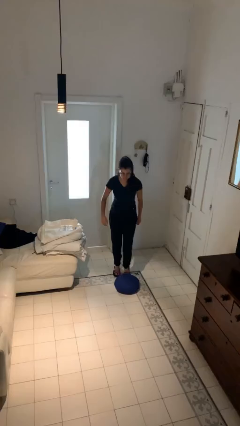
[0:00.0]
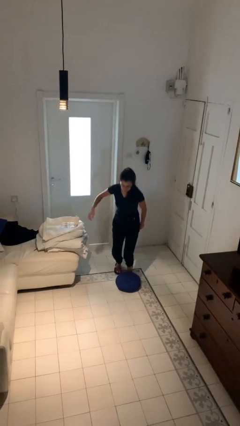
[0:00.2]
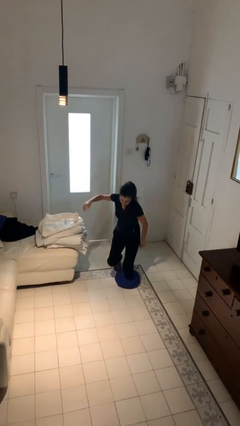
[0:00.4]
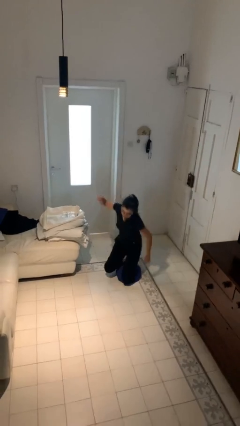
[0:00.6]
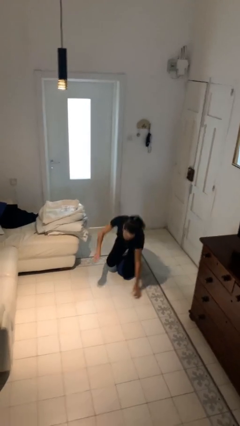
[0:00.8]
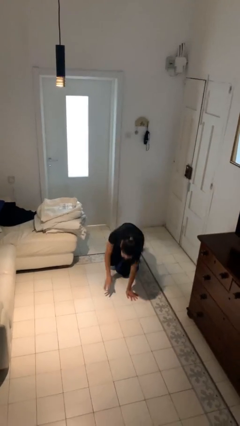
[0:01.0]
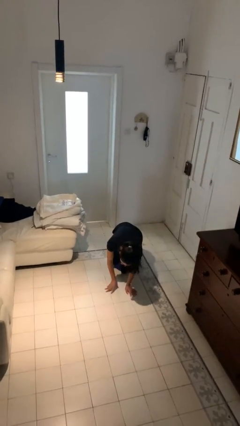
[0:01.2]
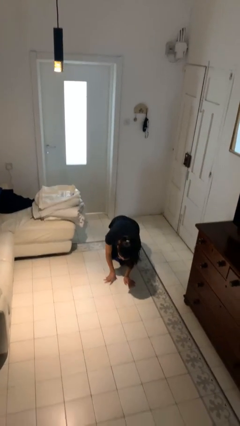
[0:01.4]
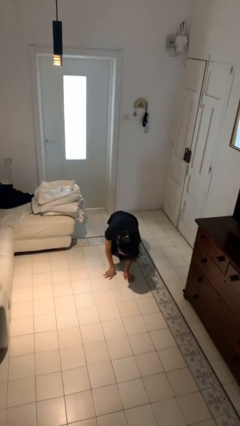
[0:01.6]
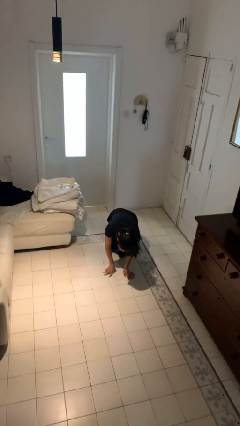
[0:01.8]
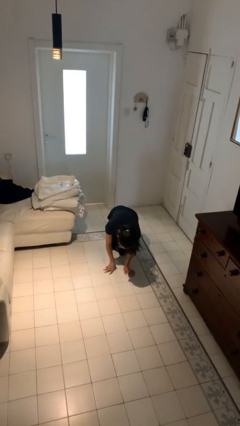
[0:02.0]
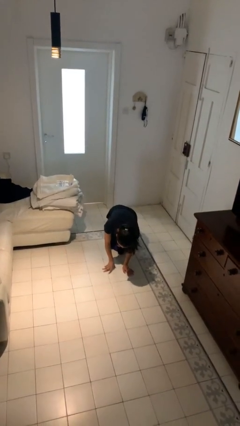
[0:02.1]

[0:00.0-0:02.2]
person trips on object on floor

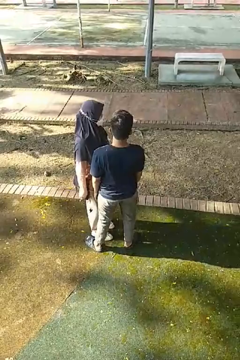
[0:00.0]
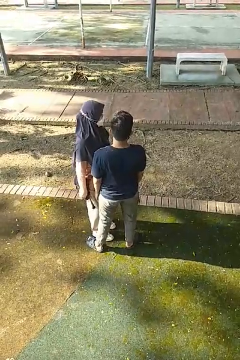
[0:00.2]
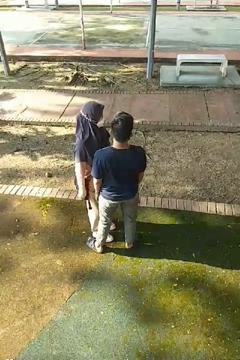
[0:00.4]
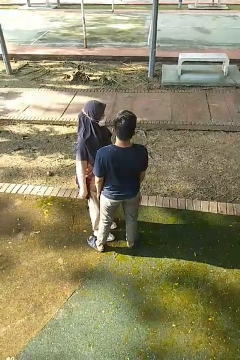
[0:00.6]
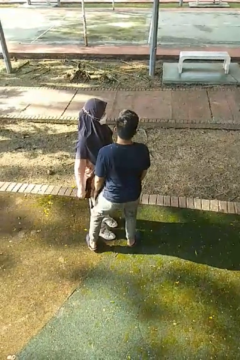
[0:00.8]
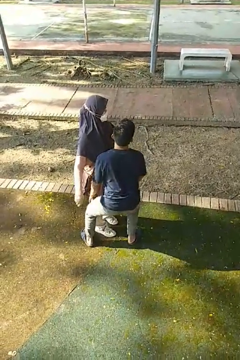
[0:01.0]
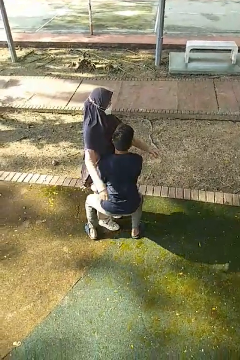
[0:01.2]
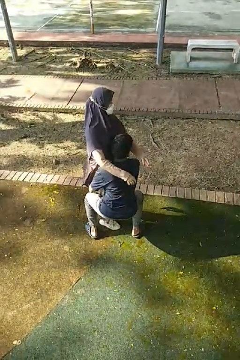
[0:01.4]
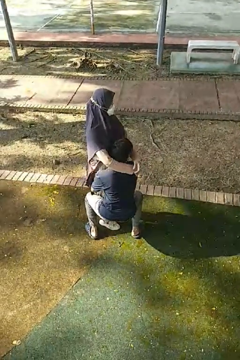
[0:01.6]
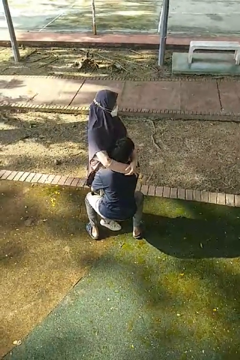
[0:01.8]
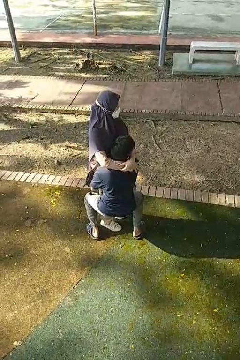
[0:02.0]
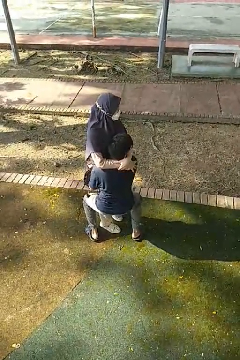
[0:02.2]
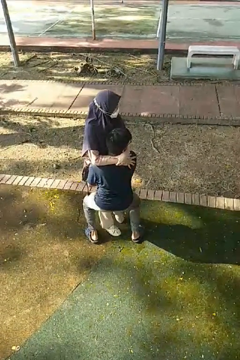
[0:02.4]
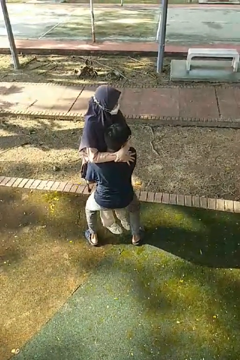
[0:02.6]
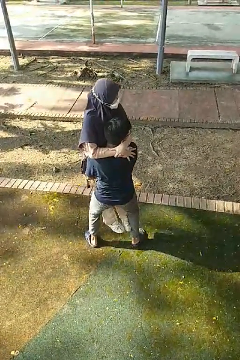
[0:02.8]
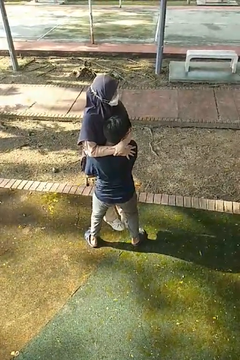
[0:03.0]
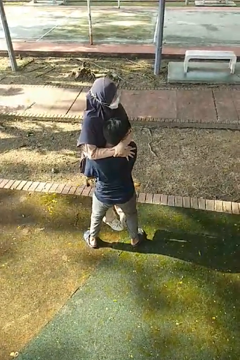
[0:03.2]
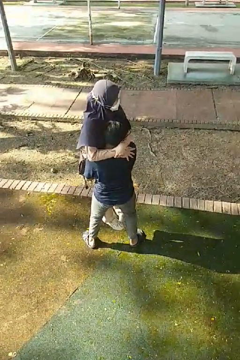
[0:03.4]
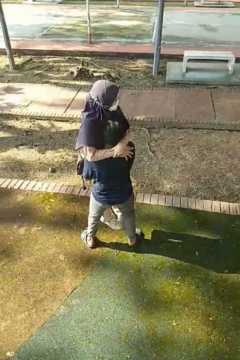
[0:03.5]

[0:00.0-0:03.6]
person picks up person

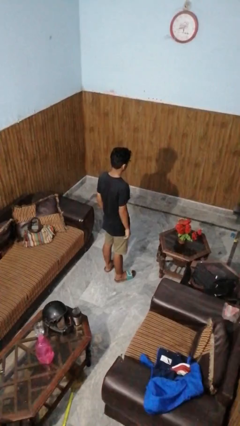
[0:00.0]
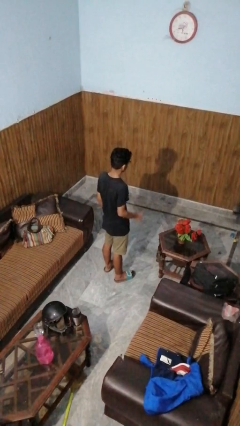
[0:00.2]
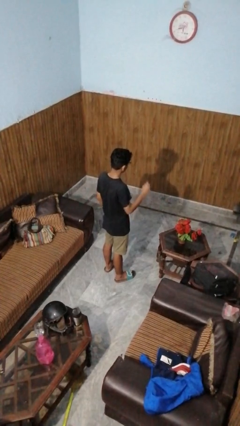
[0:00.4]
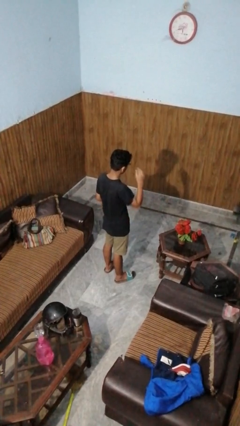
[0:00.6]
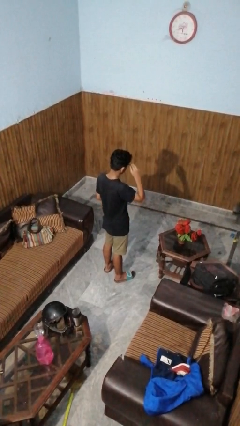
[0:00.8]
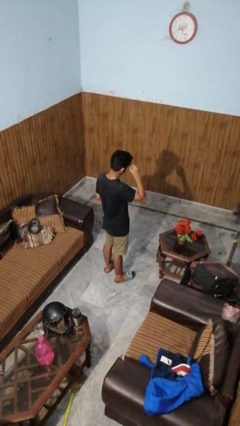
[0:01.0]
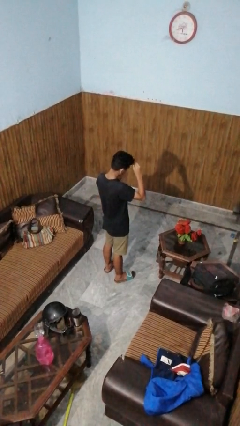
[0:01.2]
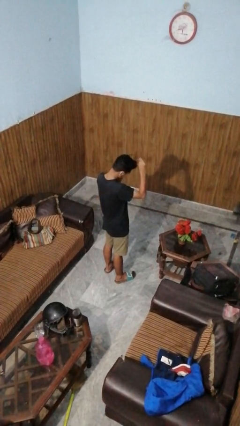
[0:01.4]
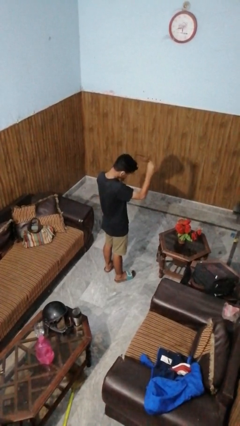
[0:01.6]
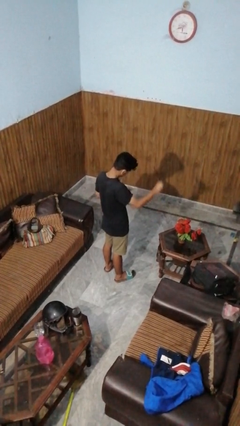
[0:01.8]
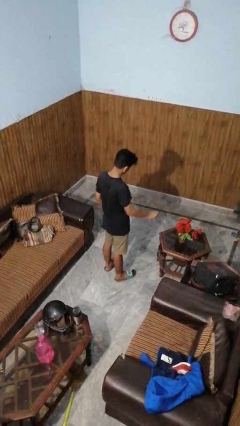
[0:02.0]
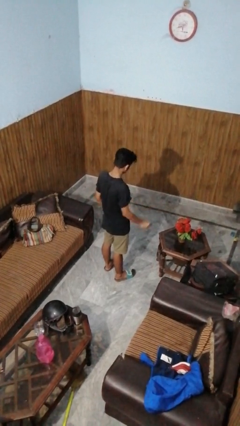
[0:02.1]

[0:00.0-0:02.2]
person takes off glasses

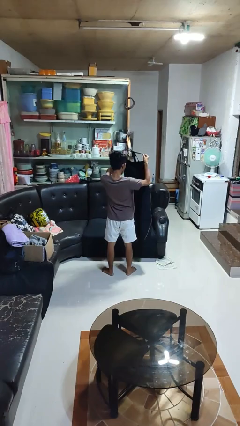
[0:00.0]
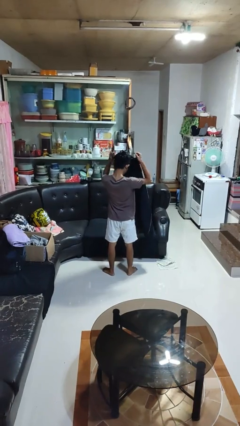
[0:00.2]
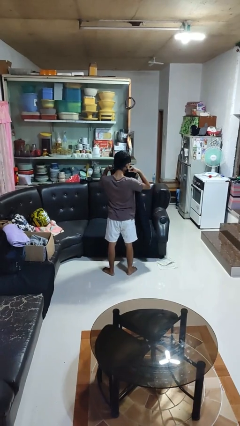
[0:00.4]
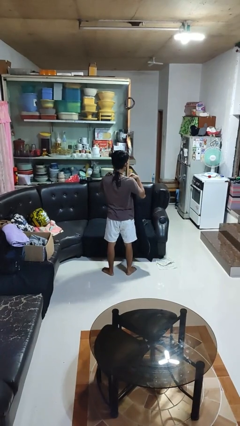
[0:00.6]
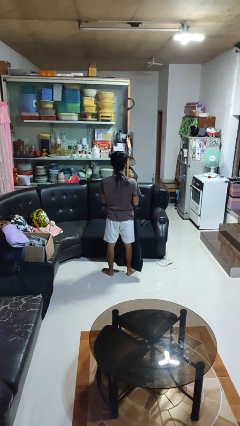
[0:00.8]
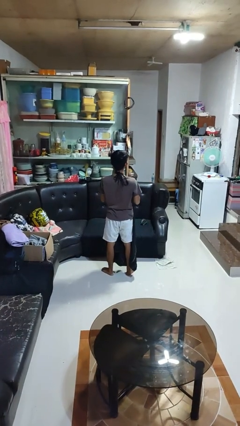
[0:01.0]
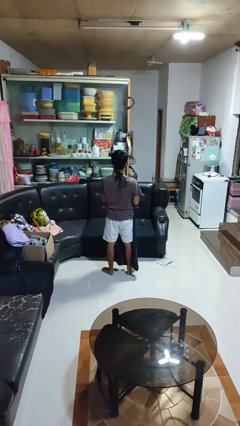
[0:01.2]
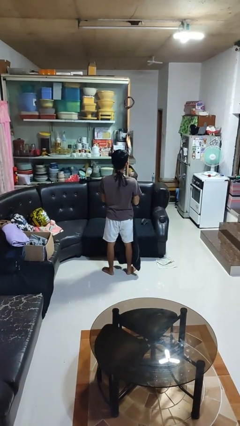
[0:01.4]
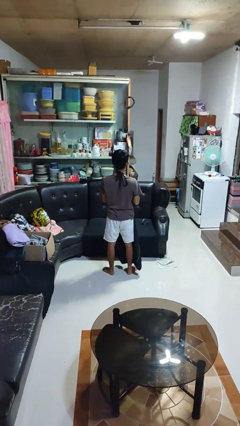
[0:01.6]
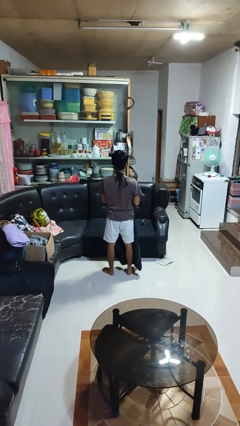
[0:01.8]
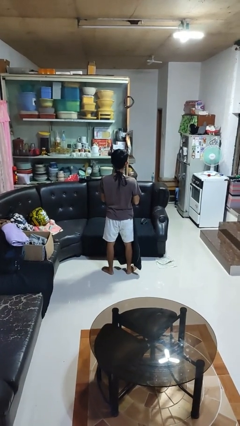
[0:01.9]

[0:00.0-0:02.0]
person puts on apron

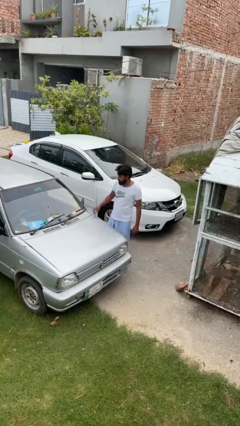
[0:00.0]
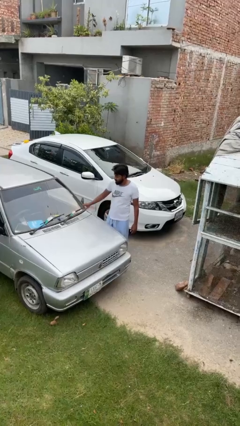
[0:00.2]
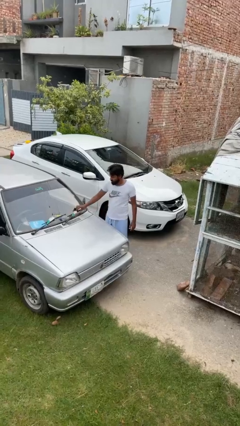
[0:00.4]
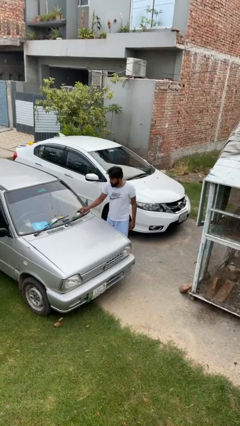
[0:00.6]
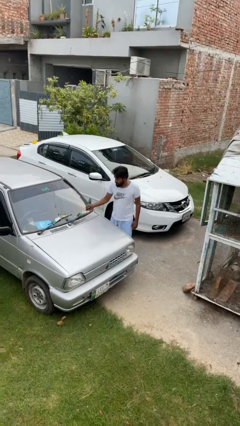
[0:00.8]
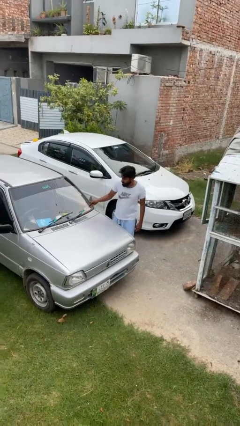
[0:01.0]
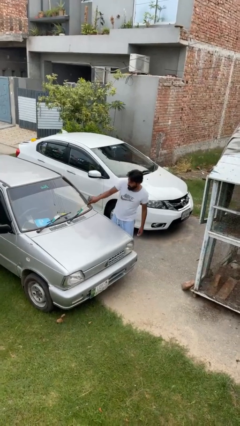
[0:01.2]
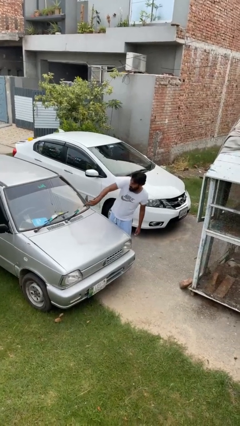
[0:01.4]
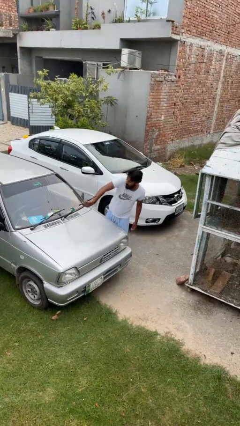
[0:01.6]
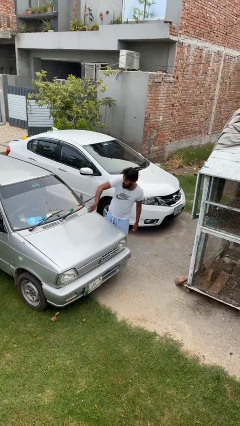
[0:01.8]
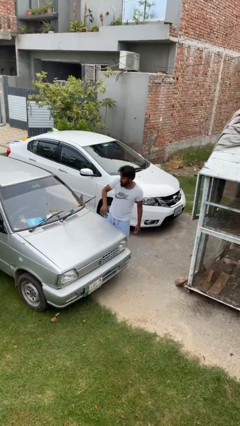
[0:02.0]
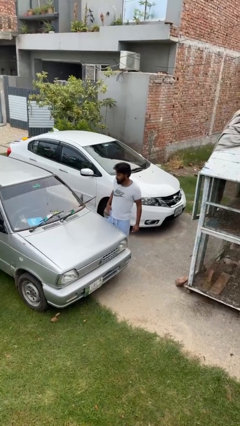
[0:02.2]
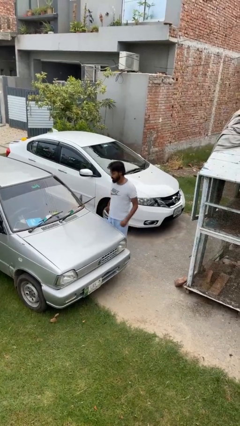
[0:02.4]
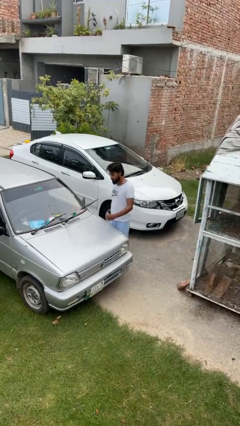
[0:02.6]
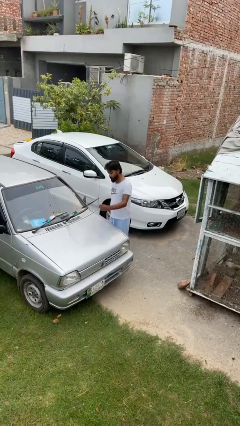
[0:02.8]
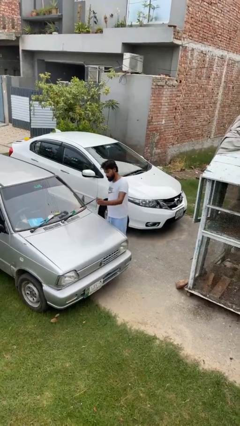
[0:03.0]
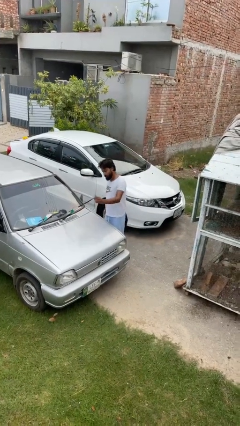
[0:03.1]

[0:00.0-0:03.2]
person flips up car wipers

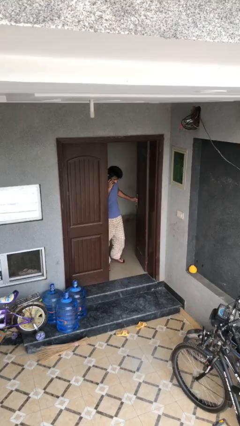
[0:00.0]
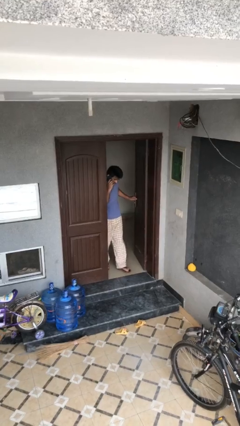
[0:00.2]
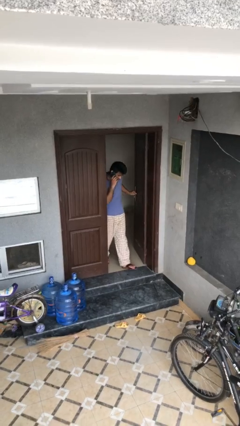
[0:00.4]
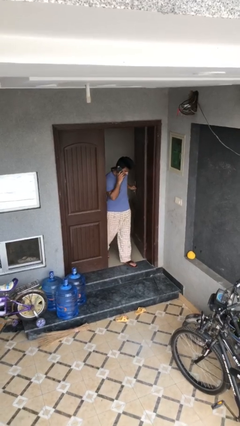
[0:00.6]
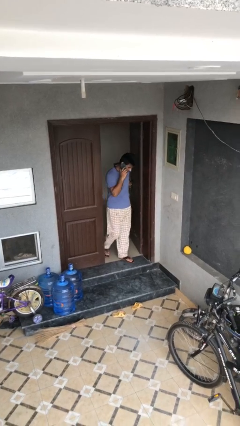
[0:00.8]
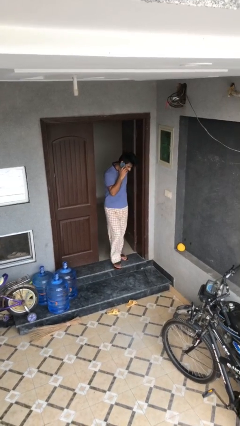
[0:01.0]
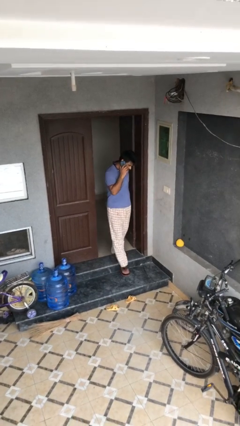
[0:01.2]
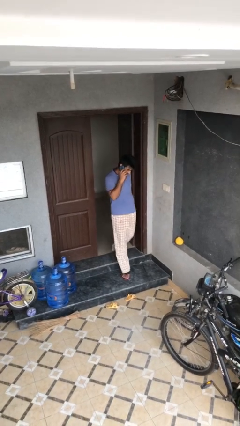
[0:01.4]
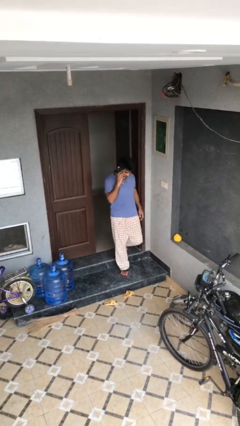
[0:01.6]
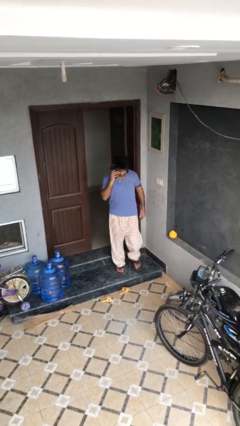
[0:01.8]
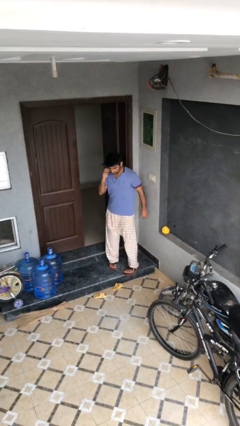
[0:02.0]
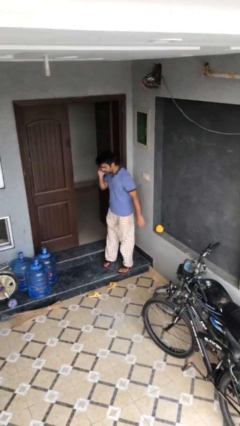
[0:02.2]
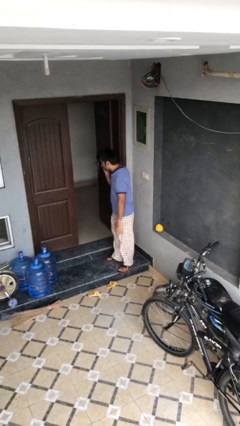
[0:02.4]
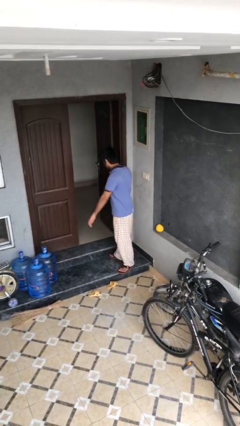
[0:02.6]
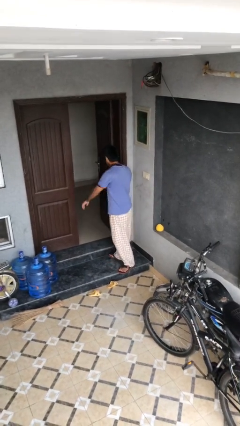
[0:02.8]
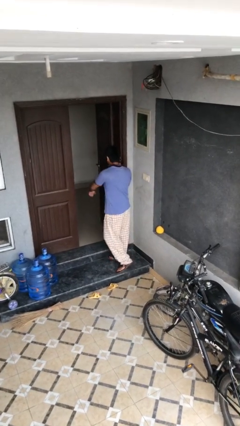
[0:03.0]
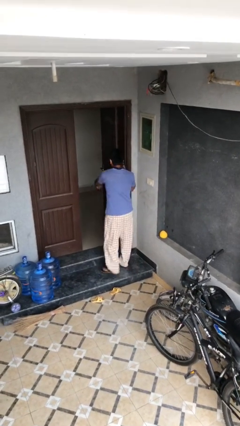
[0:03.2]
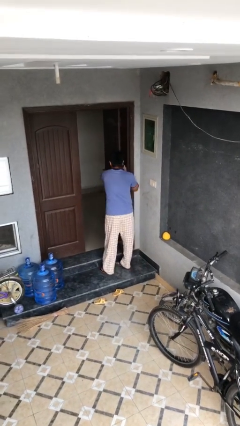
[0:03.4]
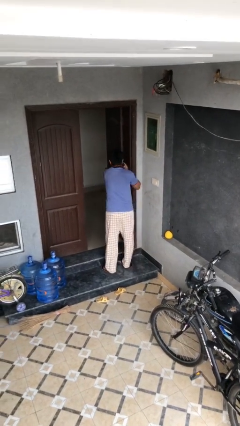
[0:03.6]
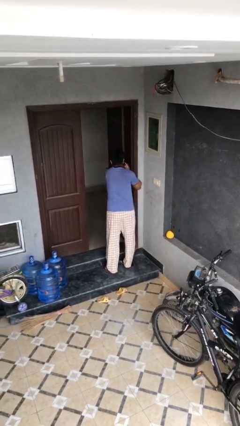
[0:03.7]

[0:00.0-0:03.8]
person enters scene through structure

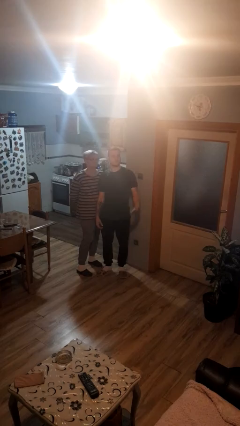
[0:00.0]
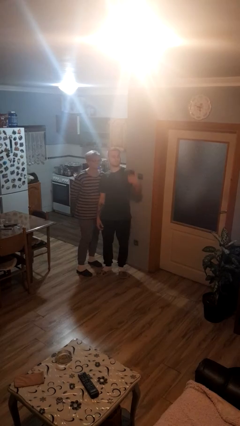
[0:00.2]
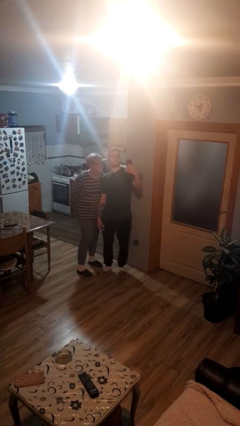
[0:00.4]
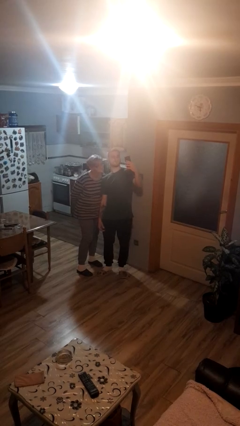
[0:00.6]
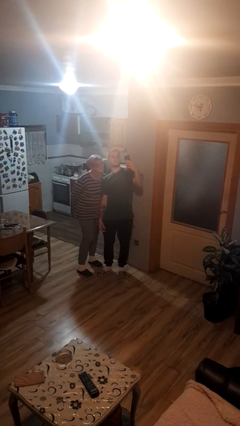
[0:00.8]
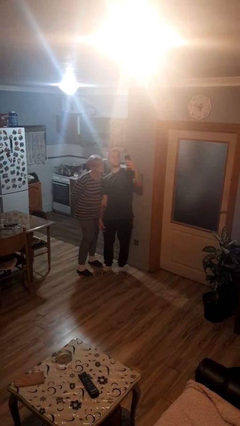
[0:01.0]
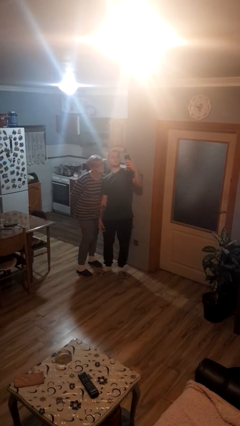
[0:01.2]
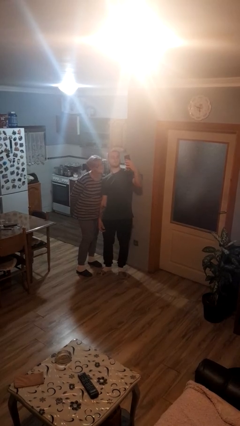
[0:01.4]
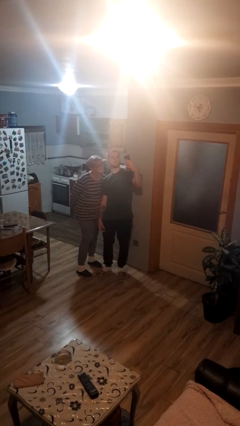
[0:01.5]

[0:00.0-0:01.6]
person takes selfie with person
